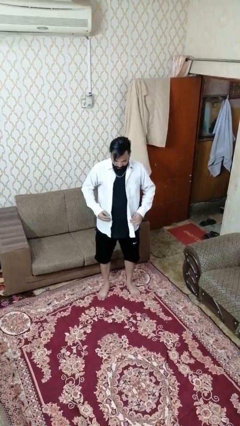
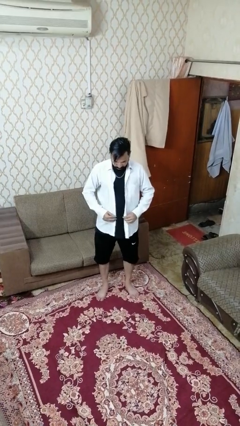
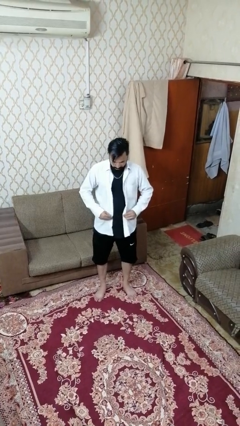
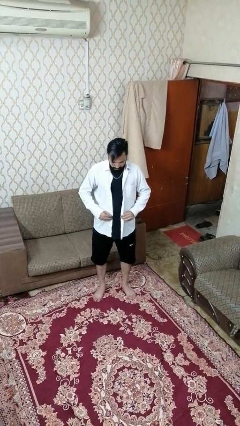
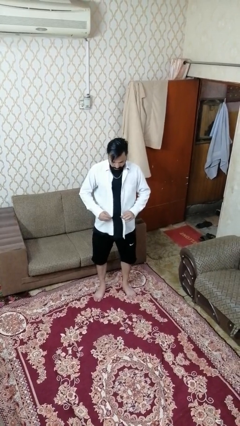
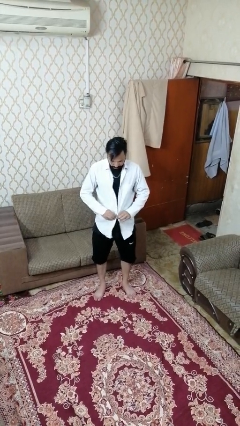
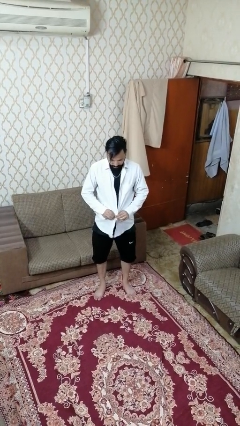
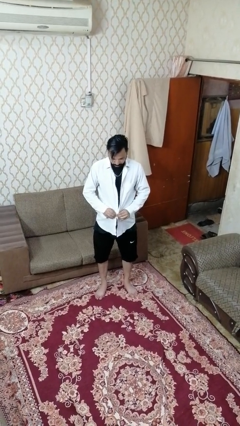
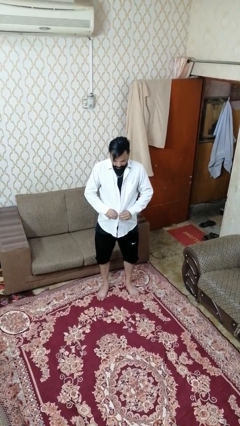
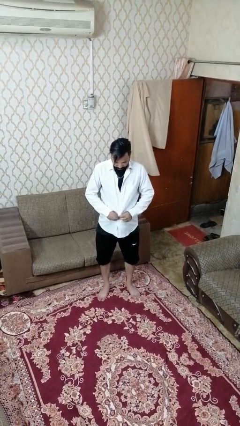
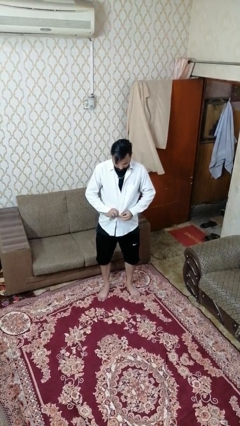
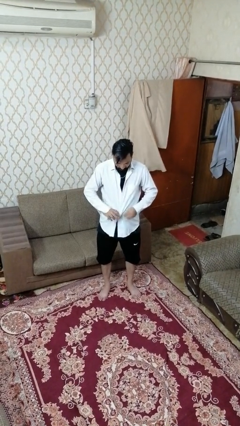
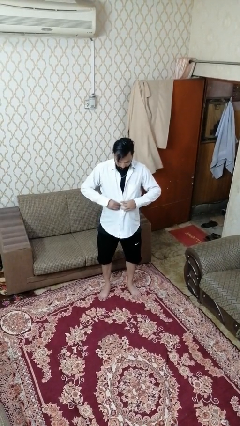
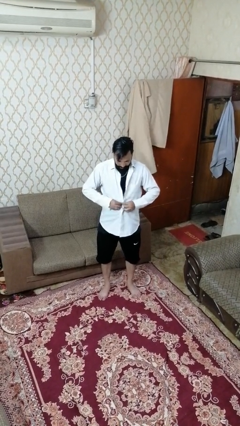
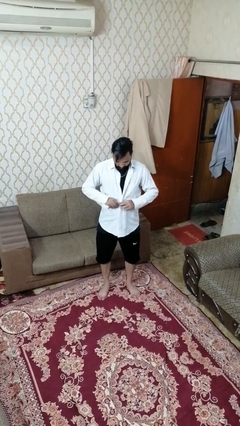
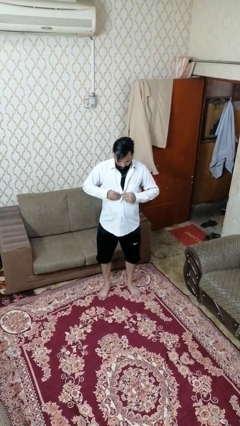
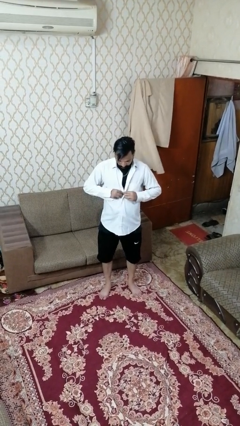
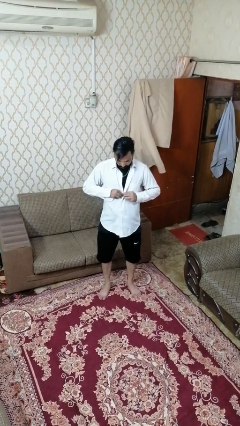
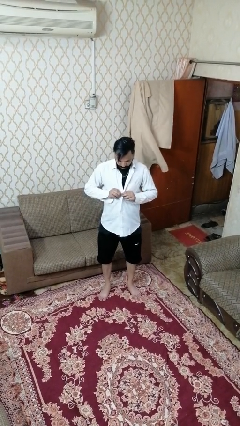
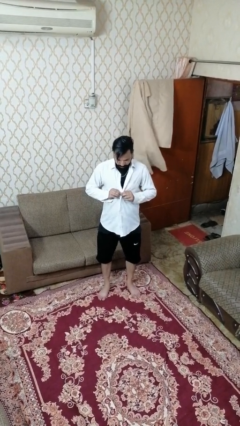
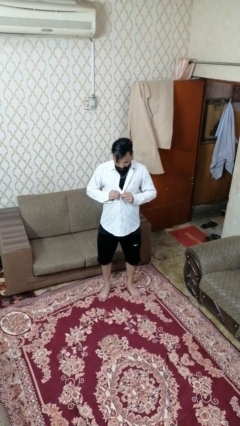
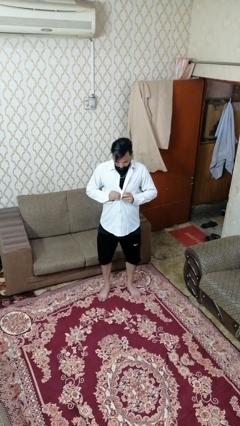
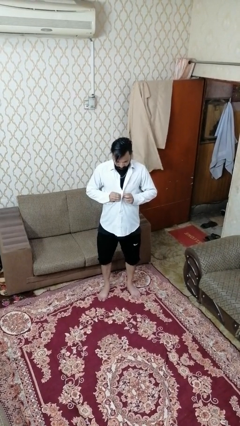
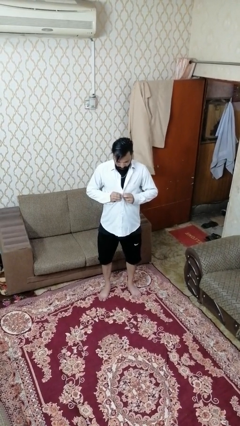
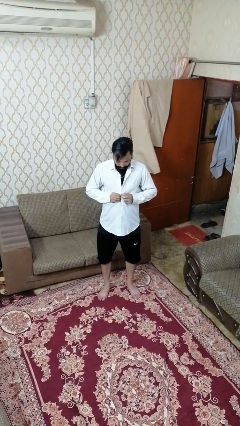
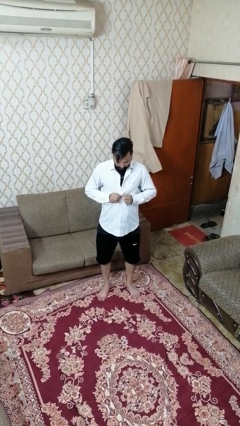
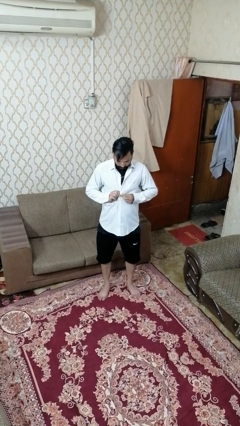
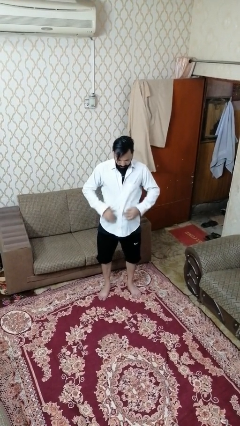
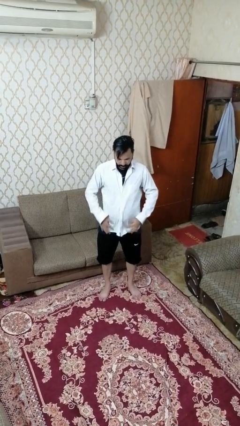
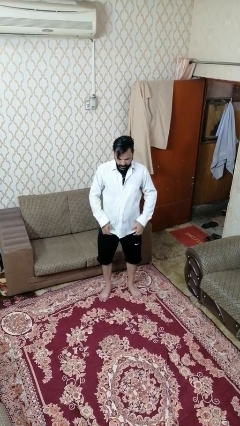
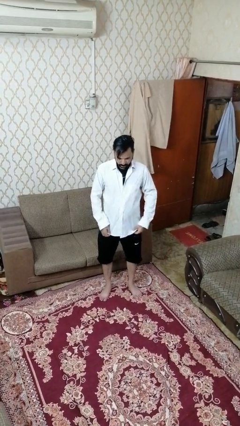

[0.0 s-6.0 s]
person buttons shirt

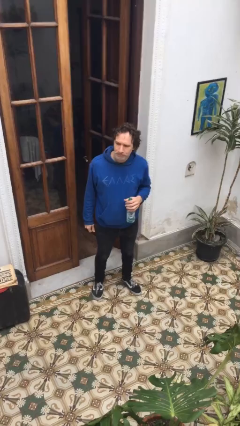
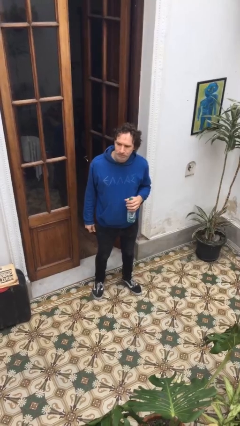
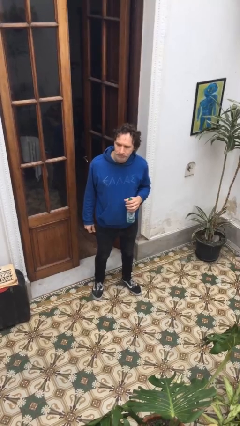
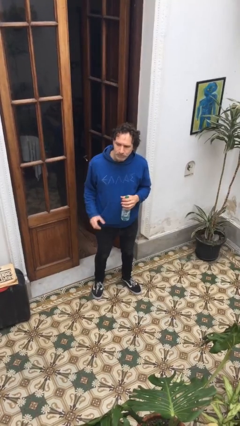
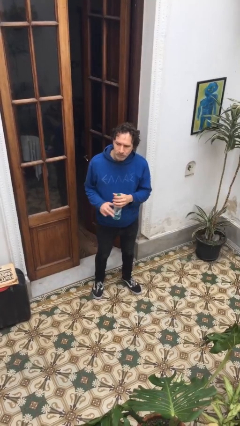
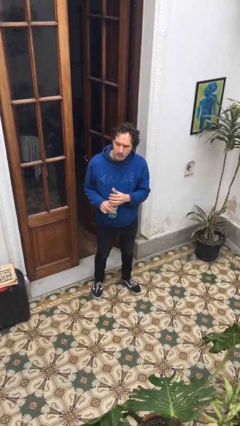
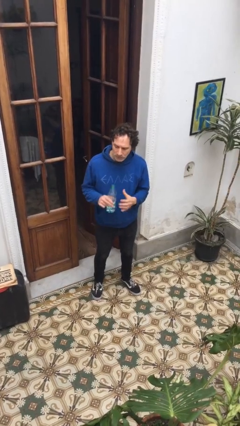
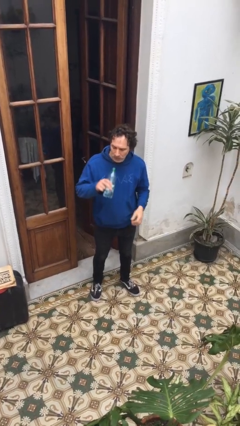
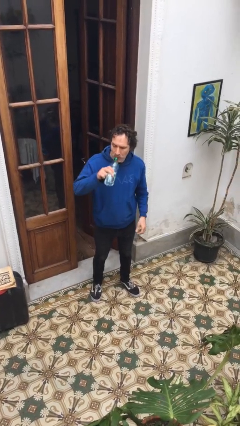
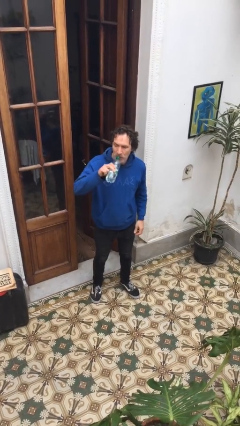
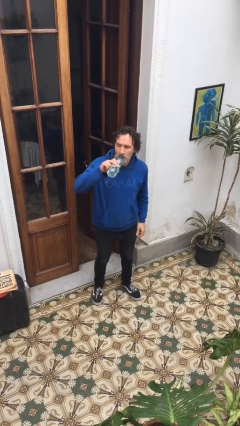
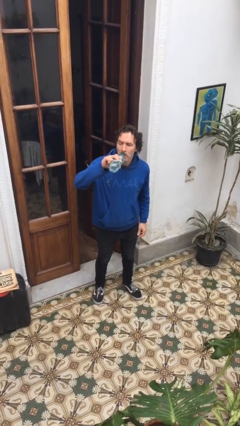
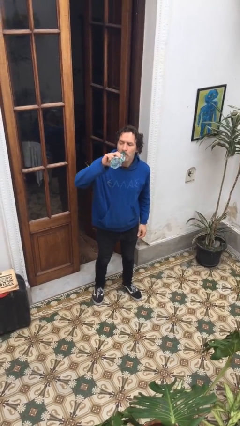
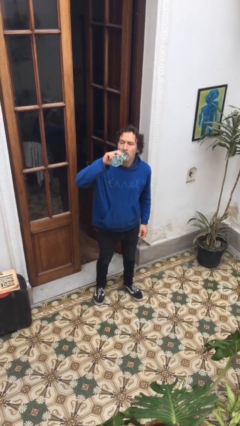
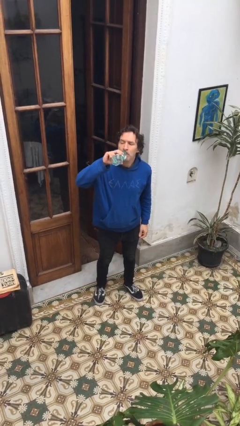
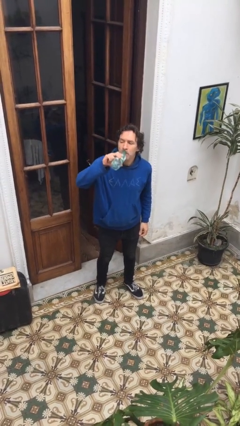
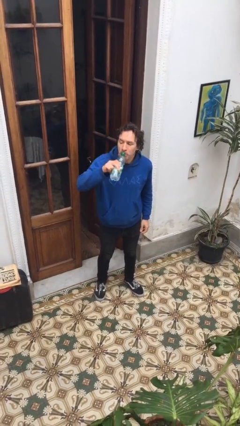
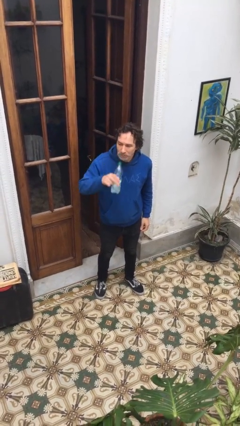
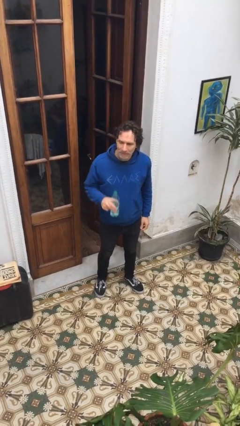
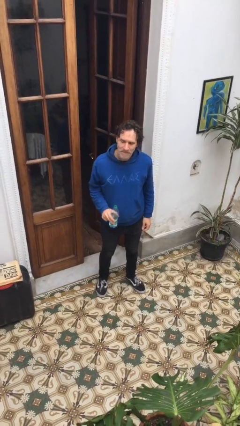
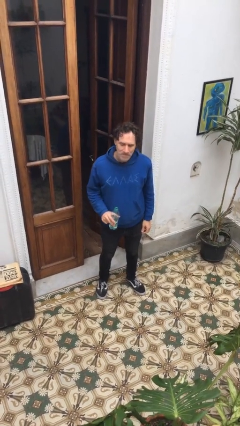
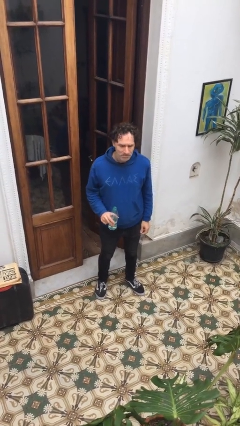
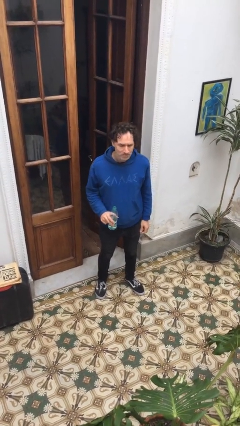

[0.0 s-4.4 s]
person drinks from bottle

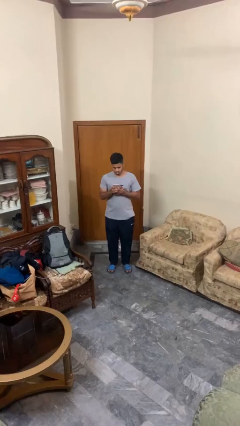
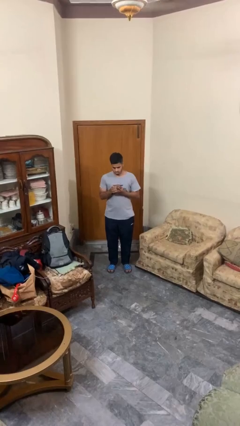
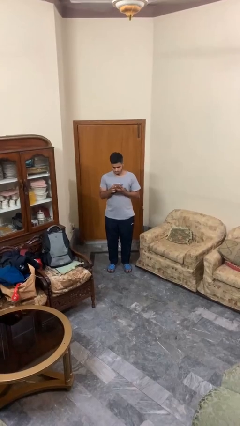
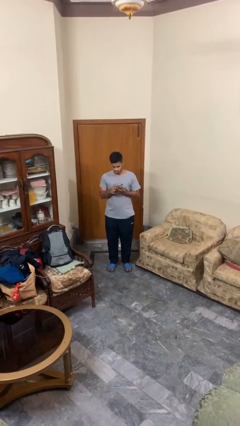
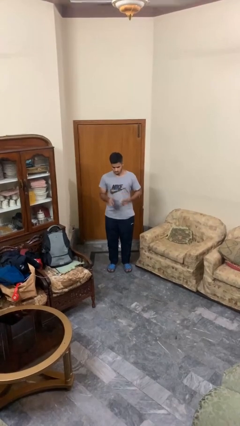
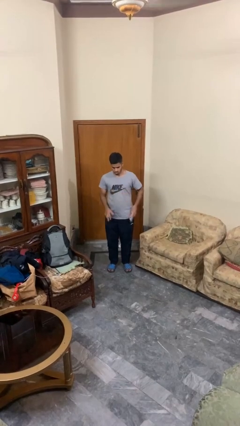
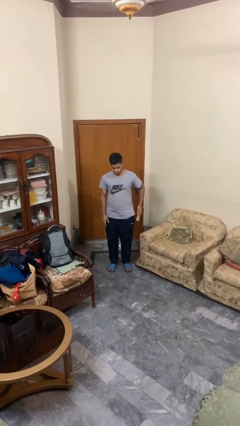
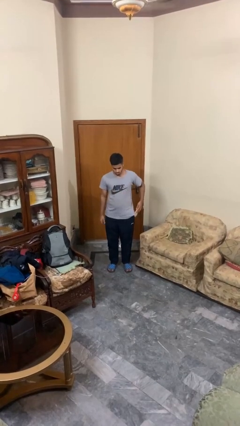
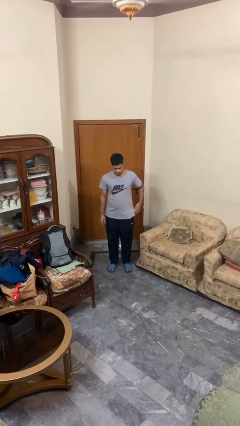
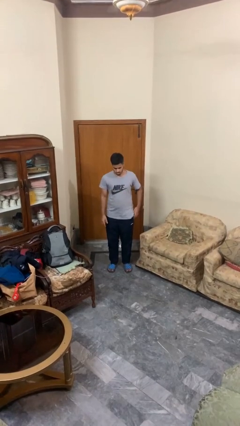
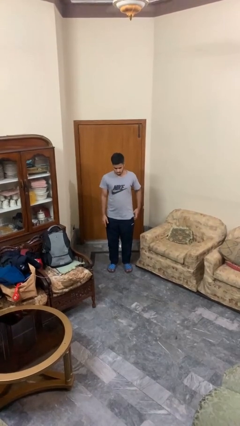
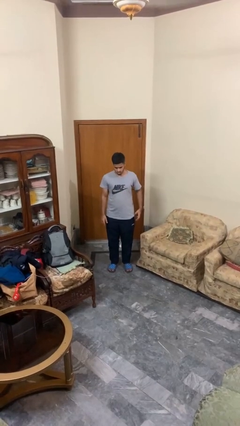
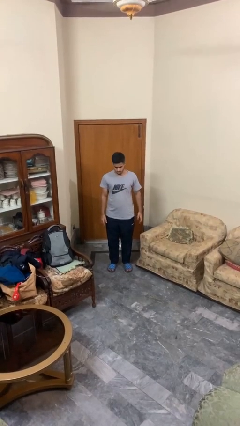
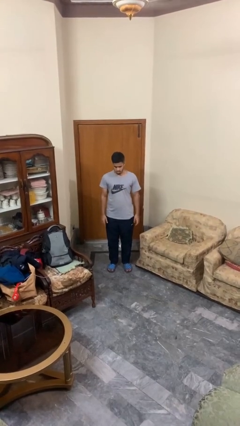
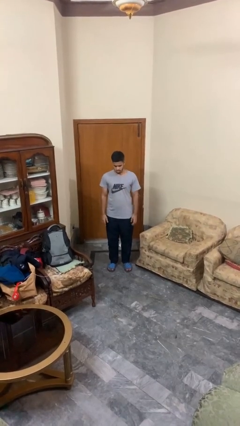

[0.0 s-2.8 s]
person puts phone into pocket

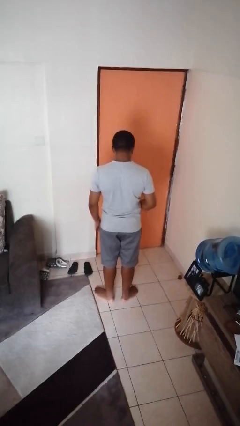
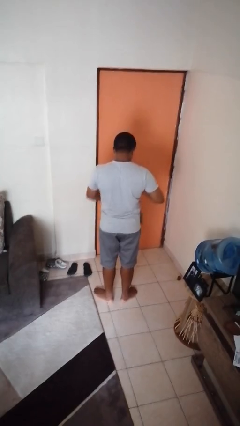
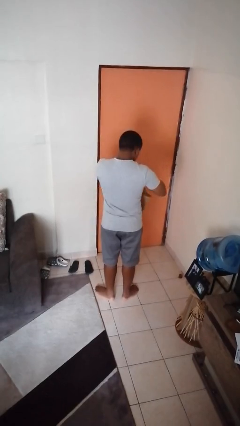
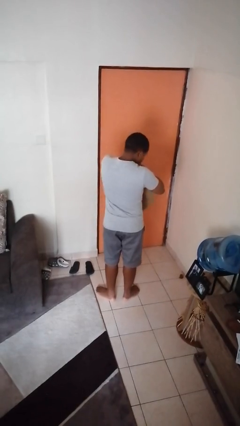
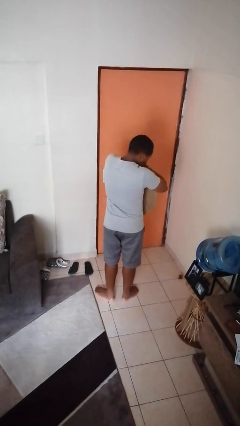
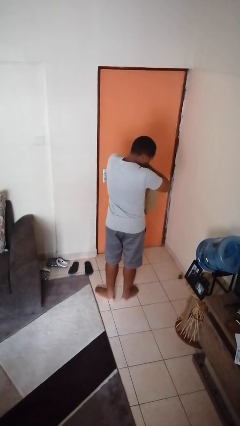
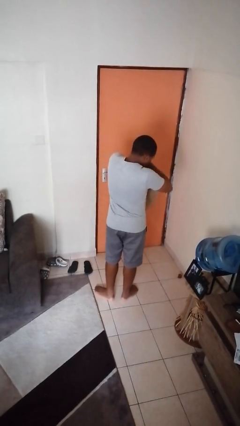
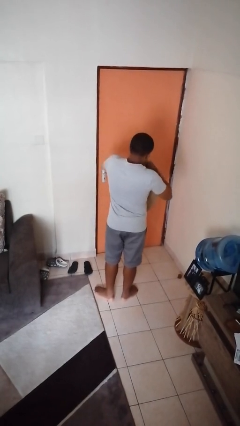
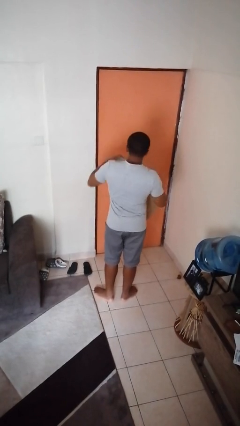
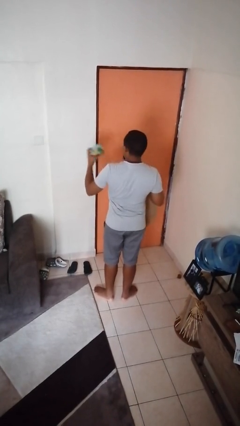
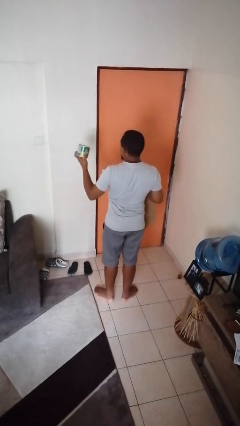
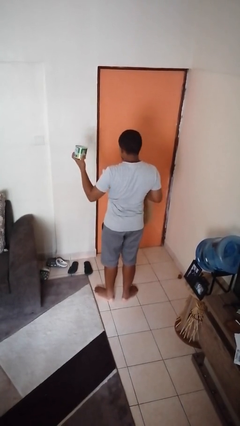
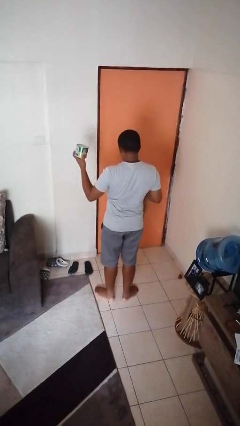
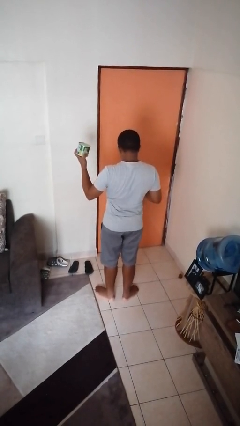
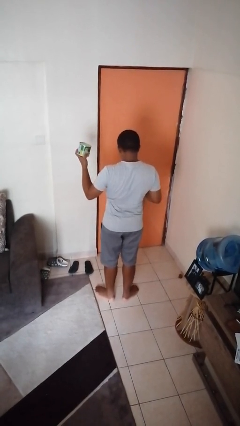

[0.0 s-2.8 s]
person takes object from bag

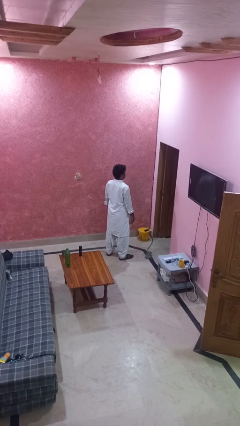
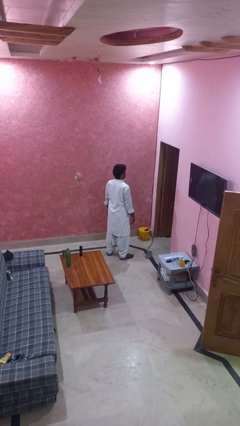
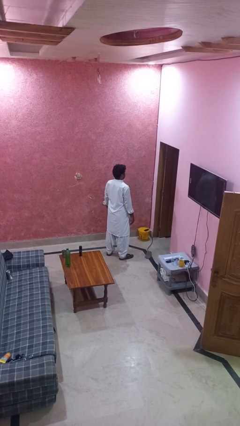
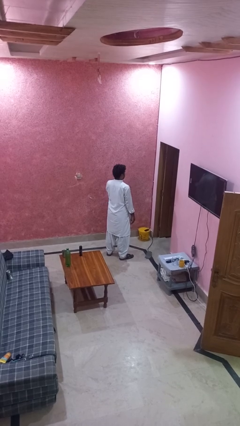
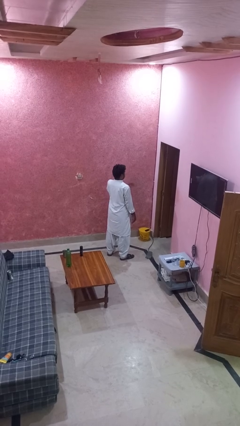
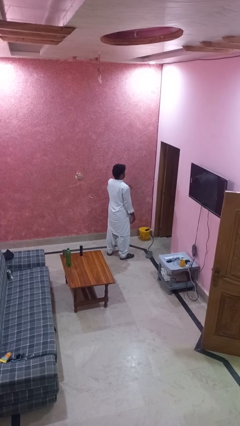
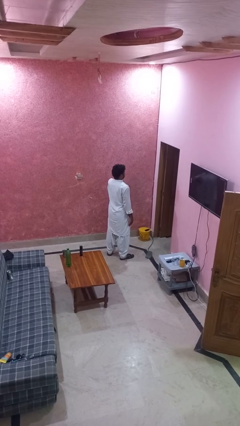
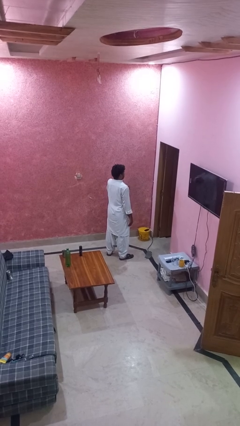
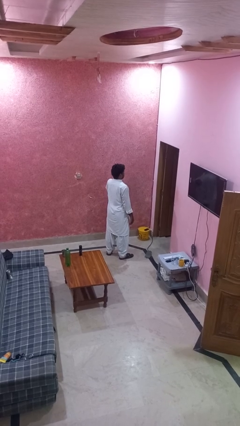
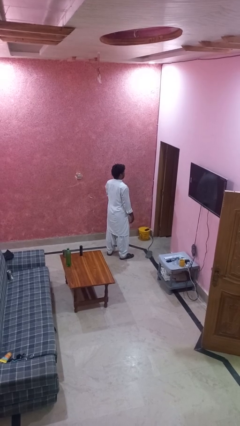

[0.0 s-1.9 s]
person drums on chest
